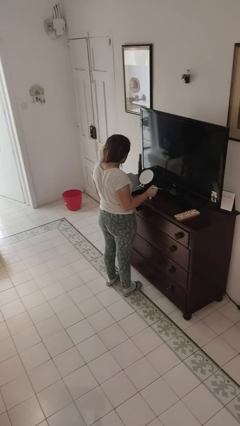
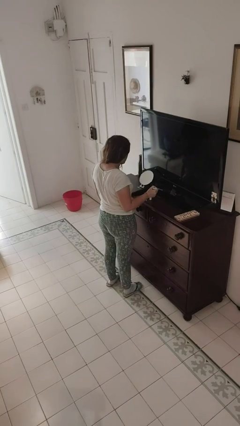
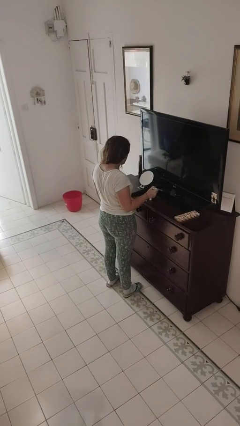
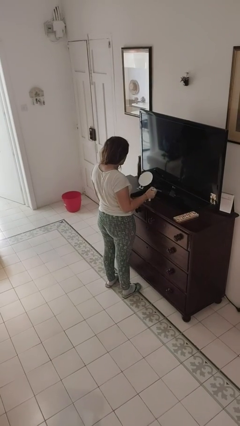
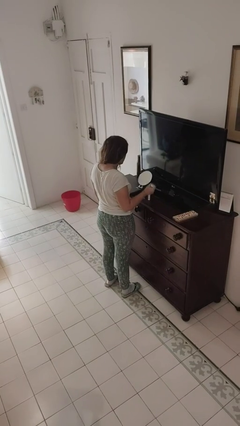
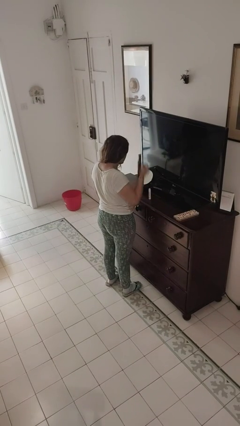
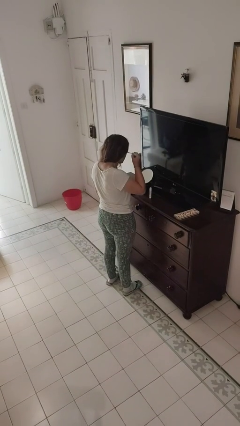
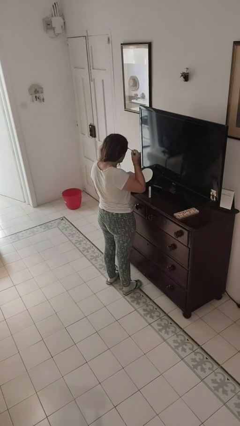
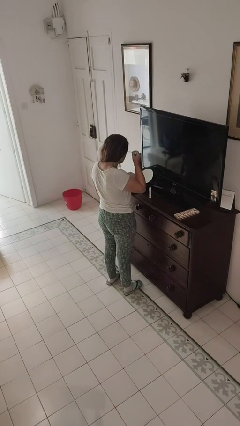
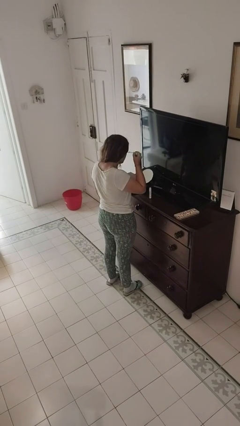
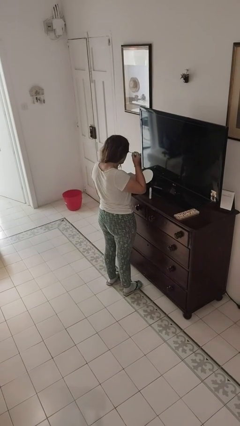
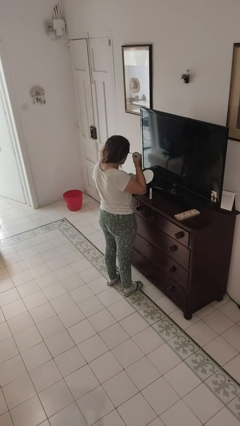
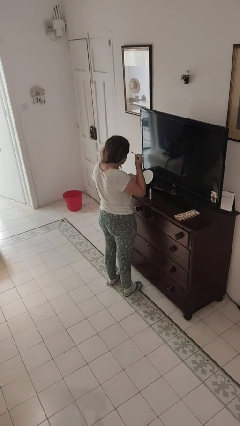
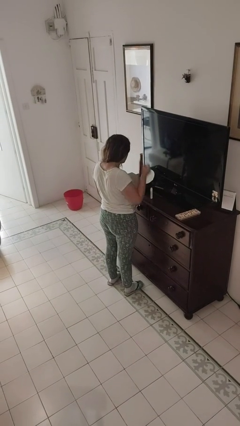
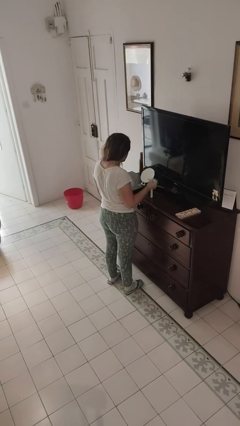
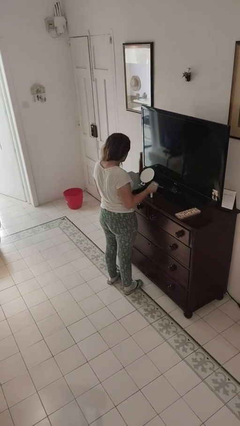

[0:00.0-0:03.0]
person applies eye makeup

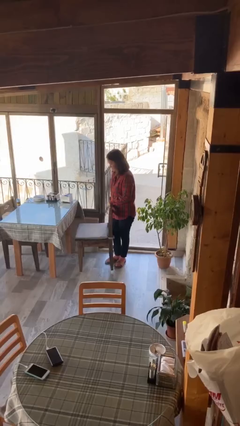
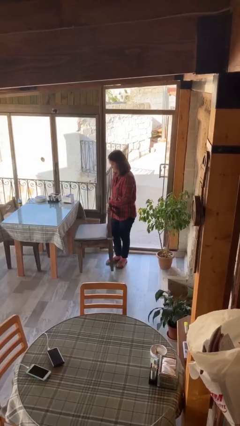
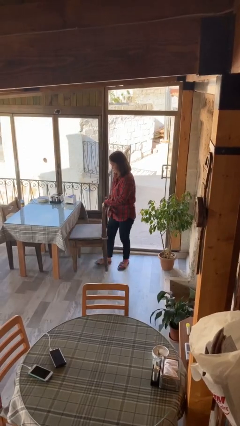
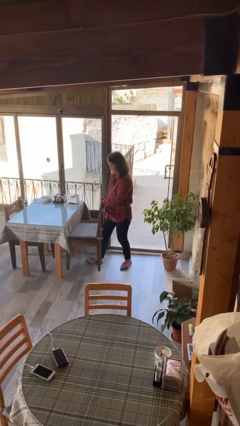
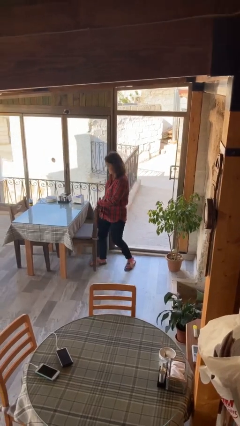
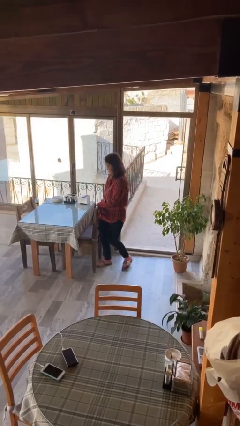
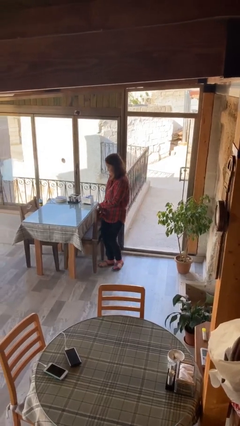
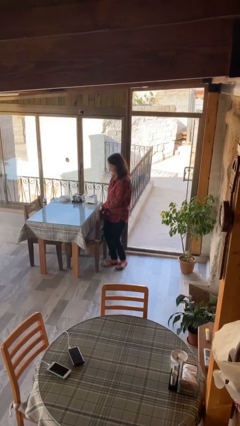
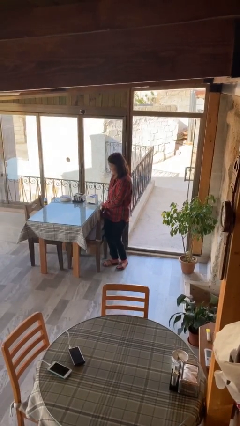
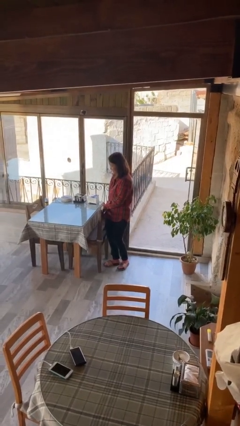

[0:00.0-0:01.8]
person pushes in chair

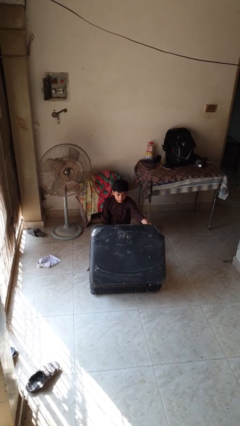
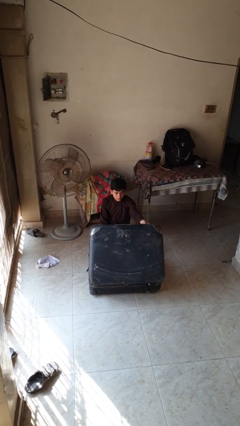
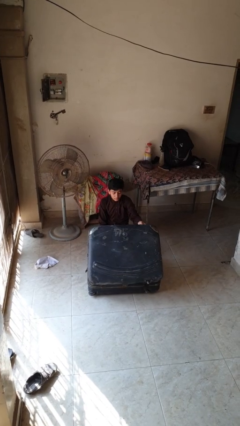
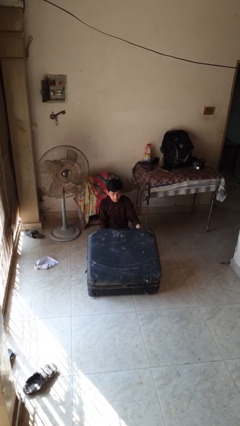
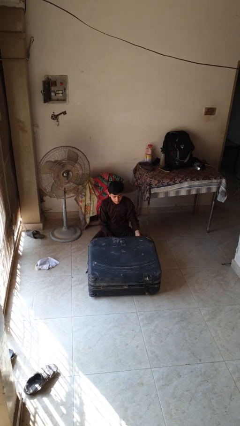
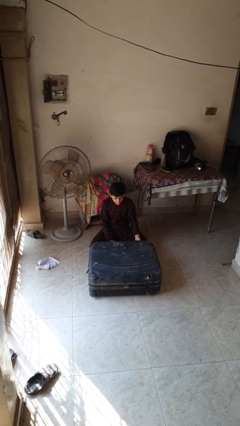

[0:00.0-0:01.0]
person closes suitcase

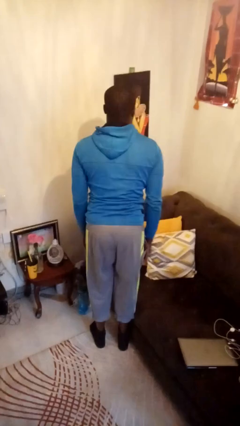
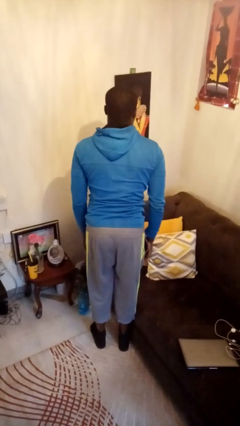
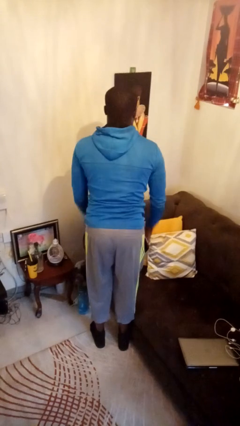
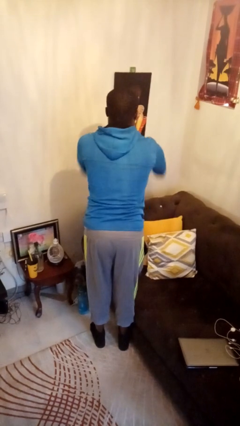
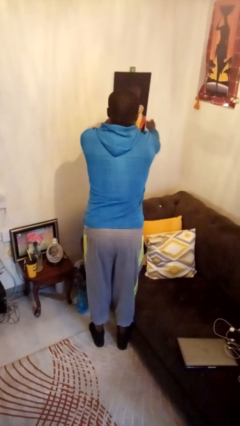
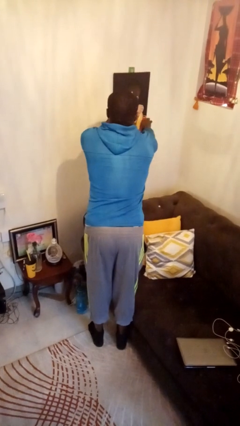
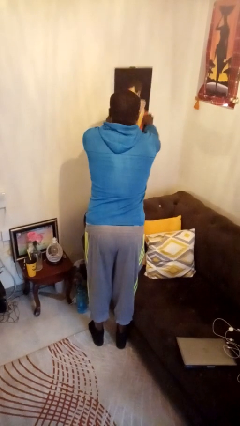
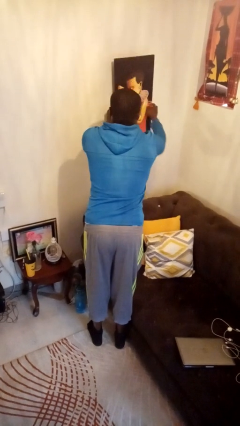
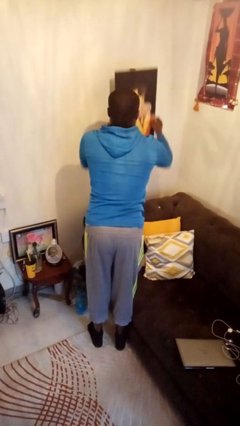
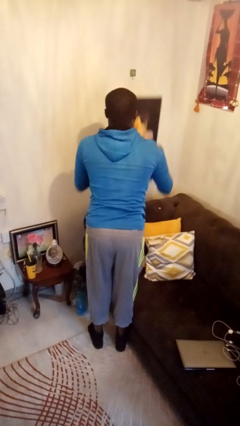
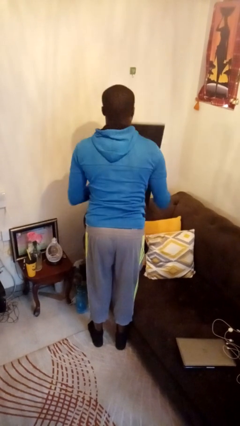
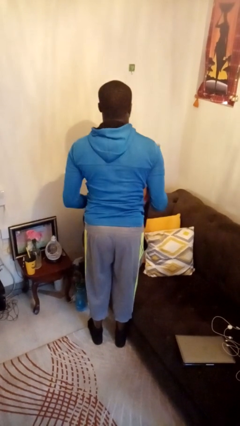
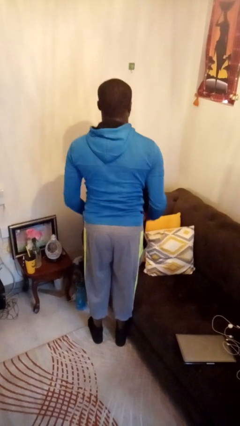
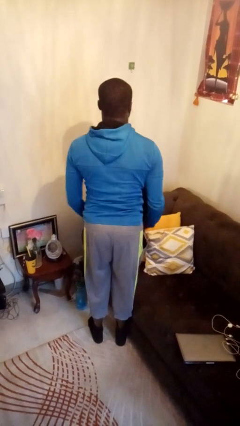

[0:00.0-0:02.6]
person takes down picture frame

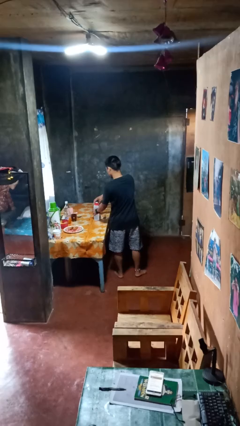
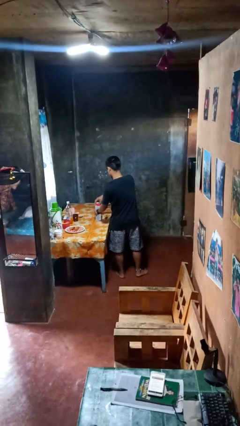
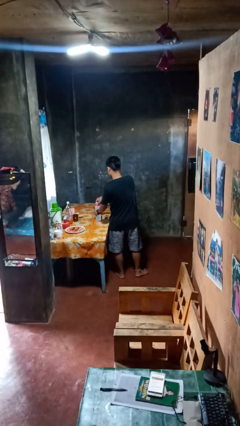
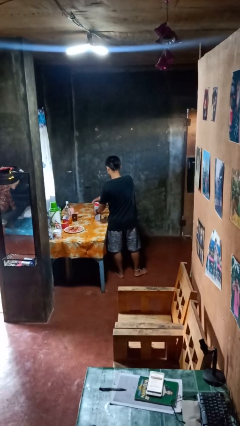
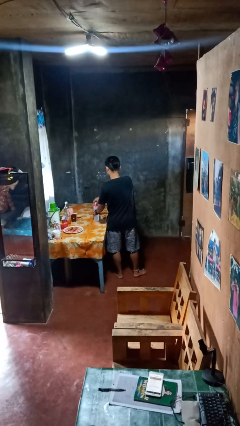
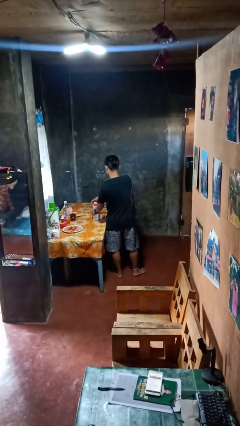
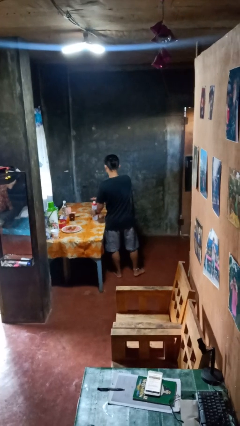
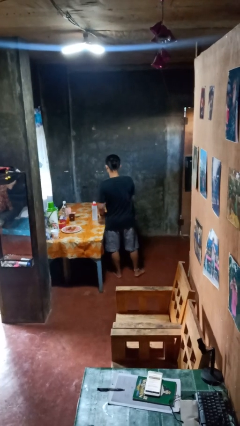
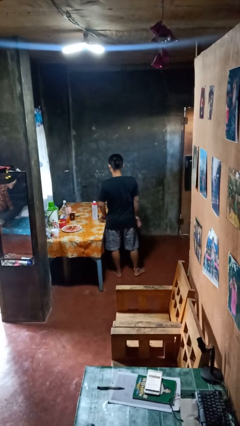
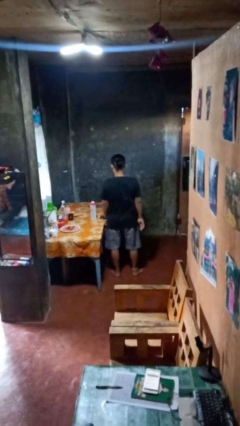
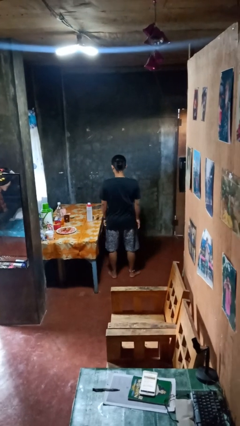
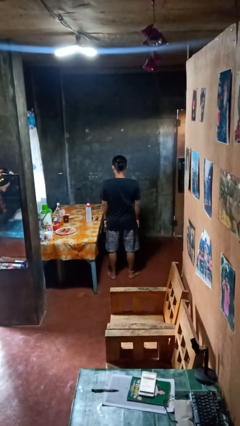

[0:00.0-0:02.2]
person closes jar

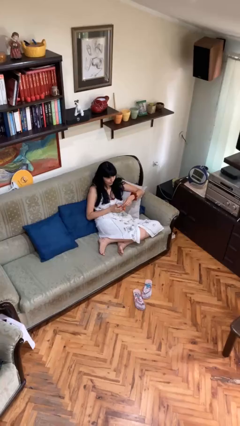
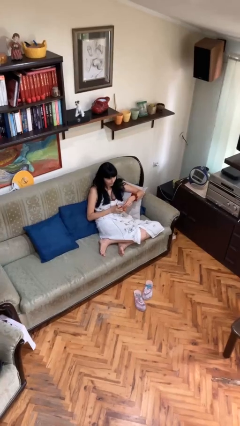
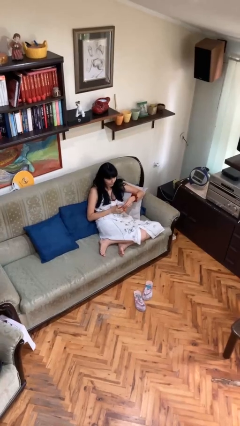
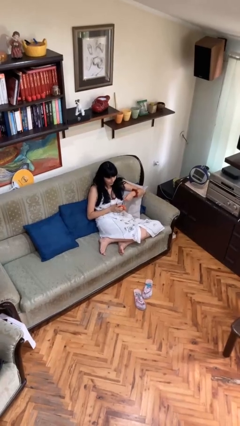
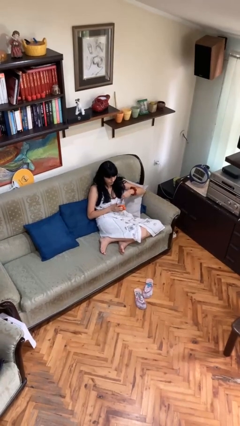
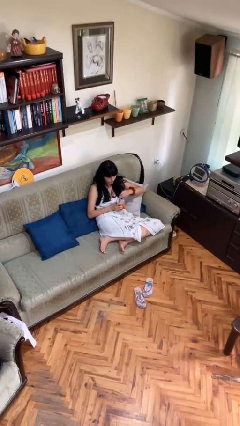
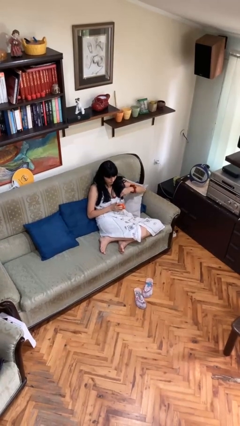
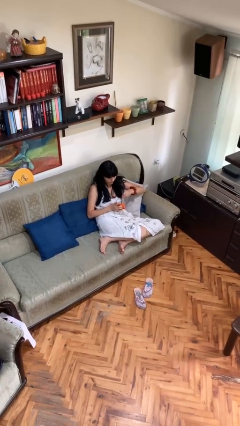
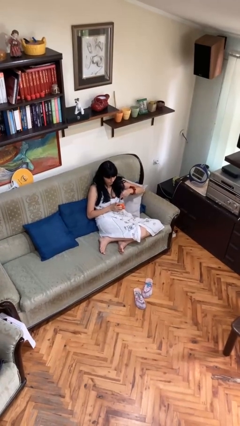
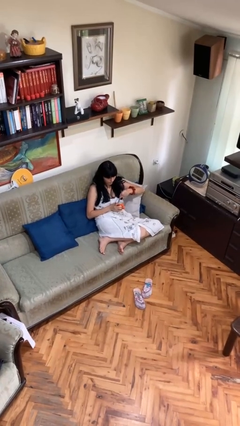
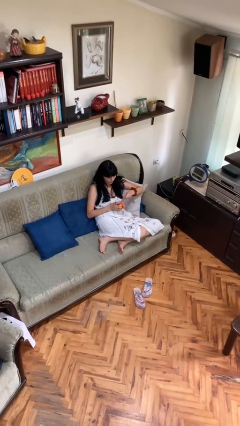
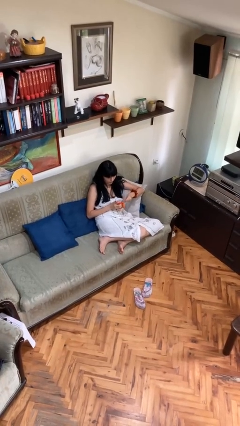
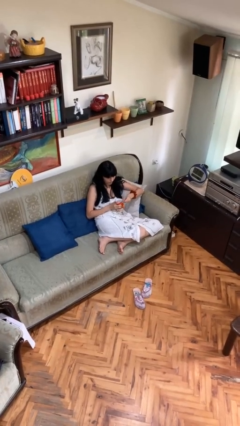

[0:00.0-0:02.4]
person stirs mug

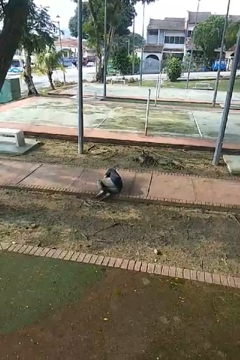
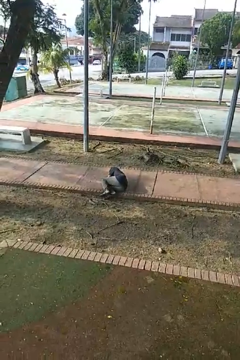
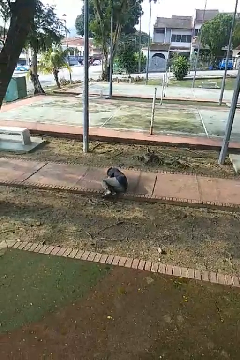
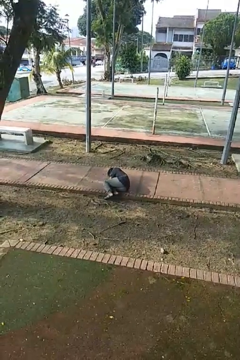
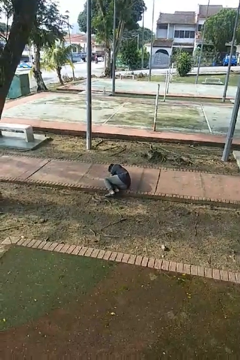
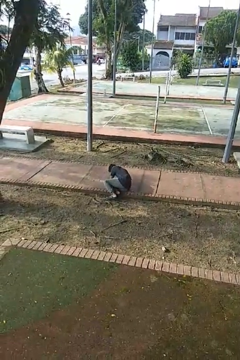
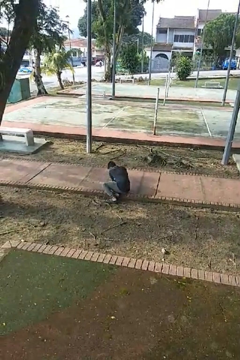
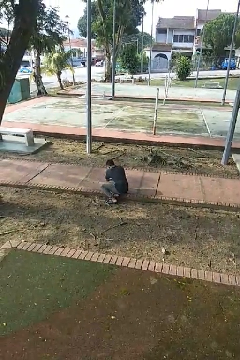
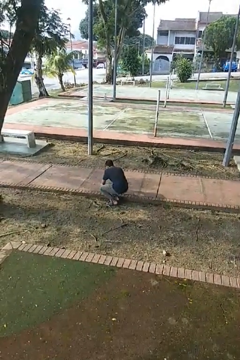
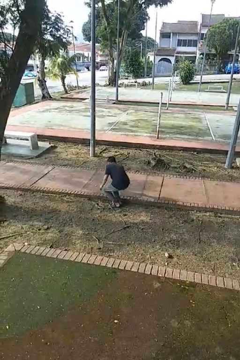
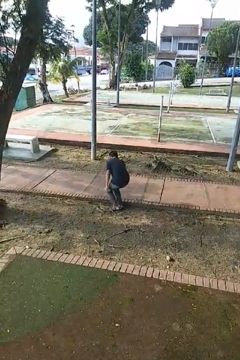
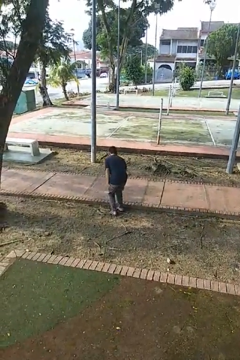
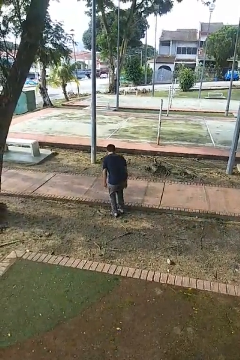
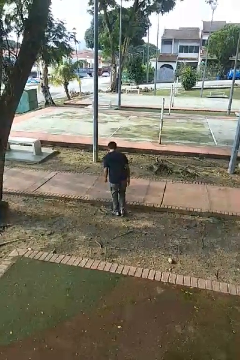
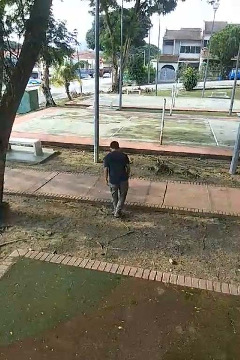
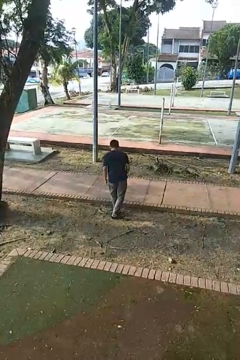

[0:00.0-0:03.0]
person stands up from floor

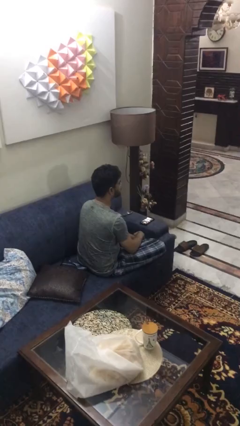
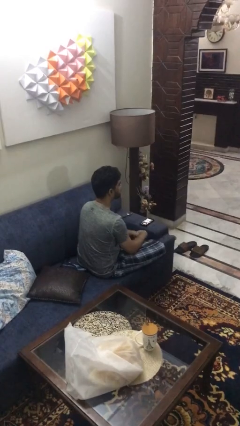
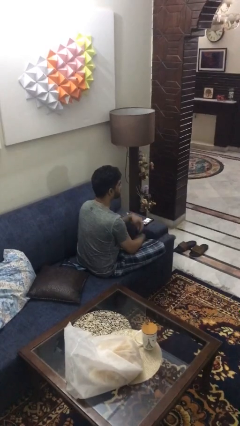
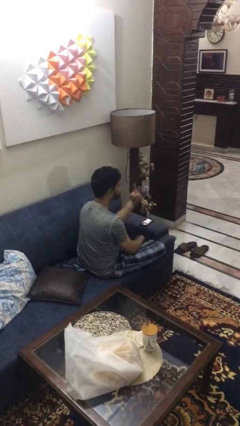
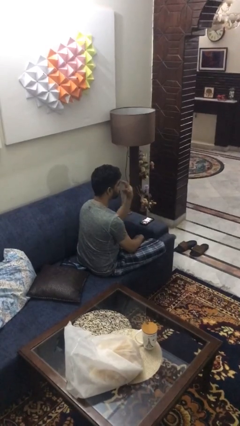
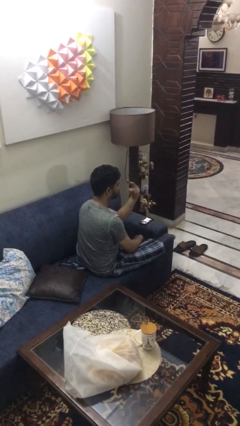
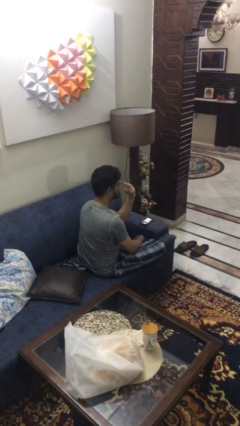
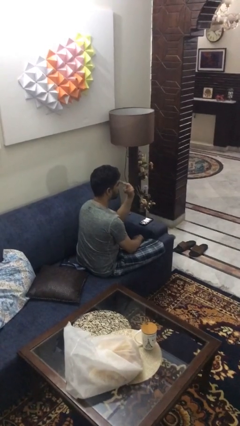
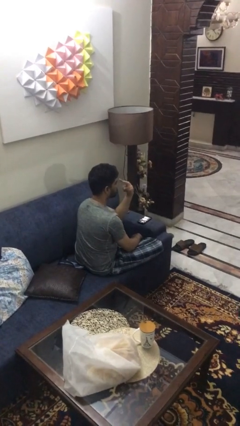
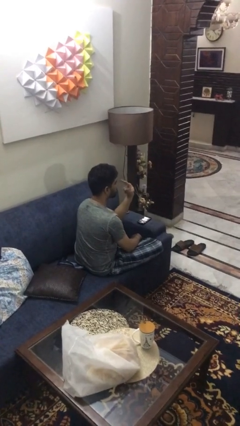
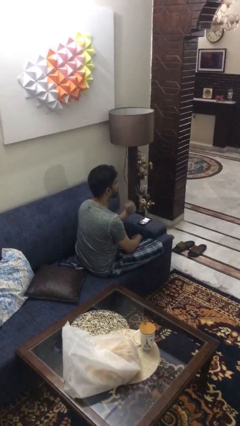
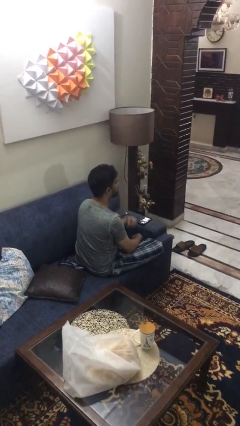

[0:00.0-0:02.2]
person gestures watch closely
